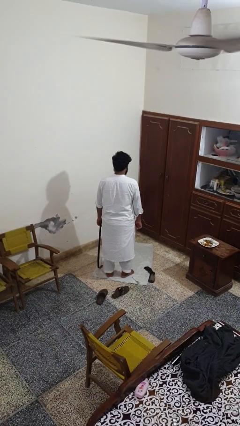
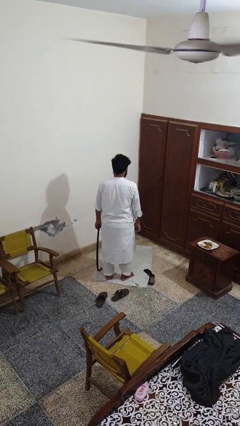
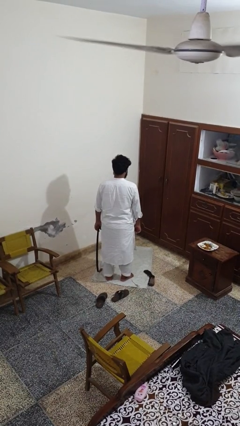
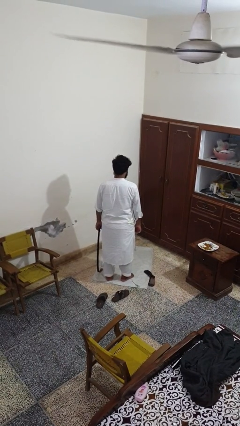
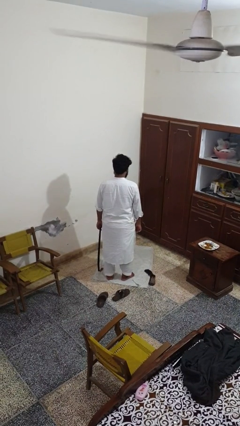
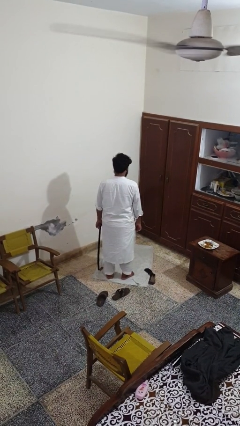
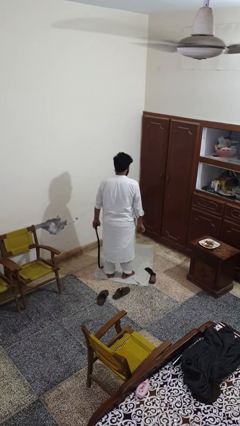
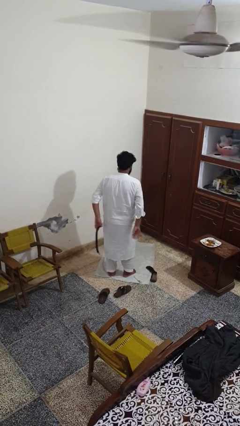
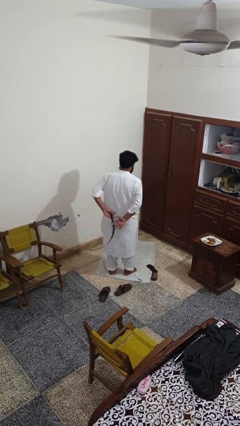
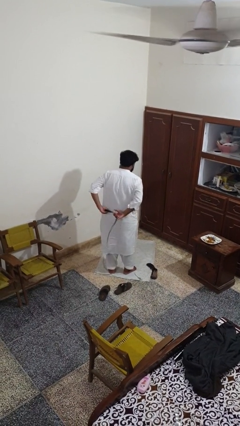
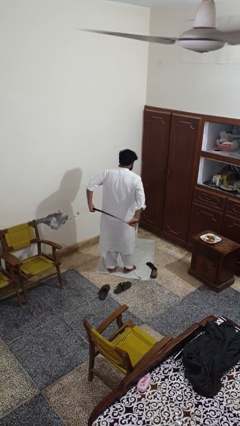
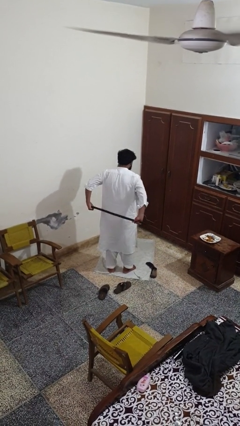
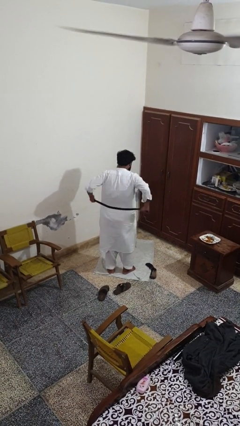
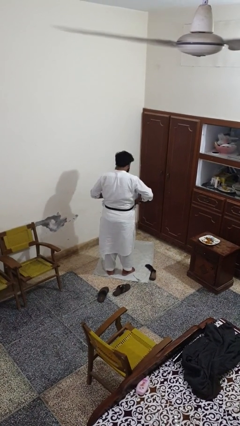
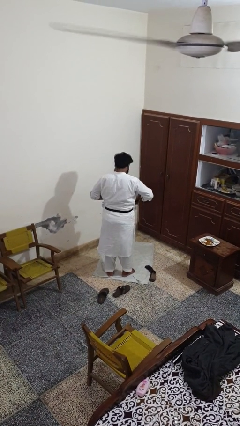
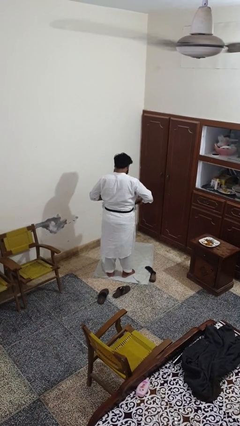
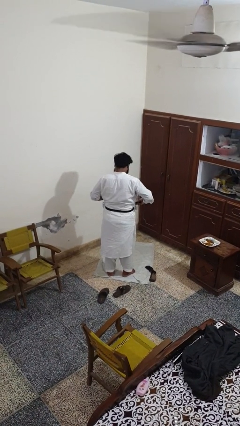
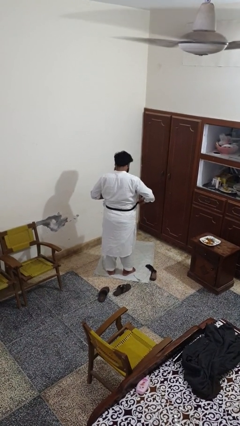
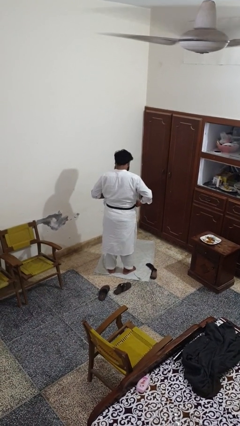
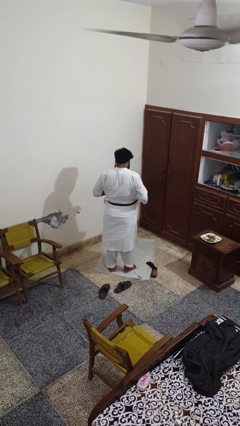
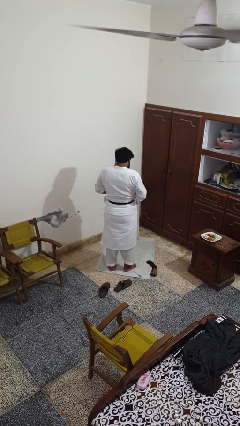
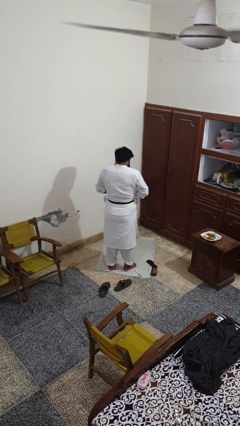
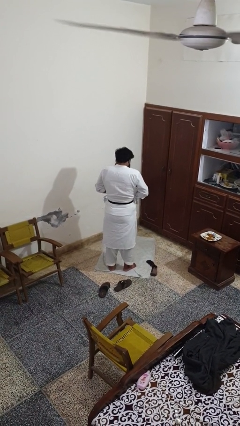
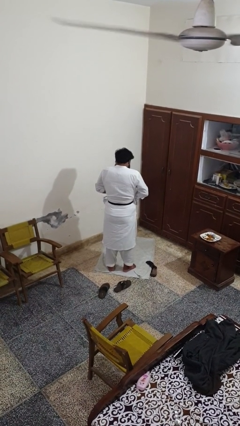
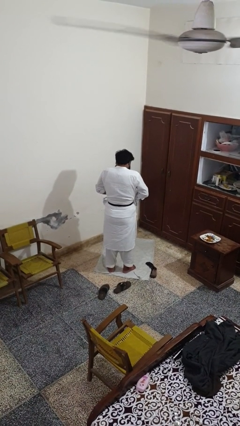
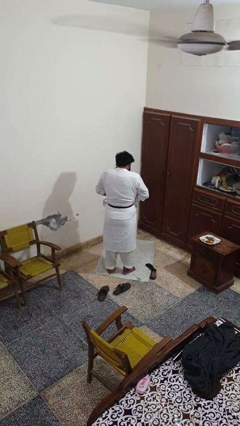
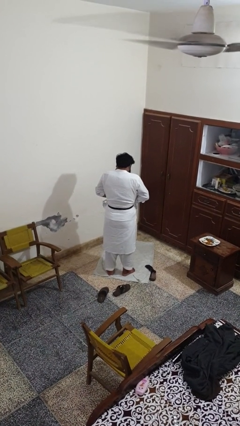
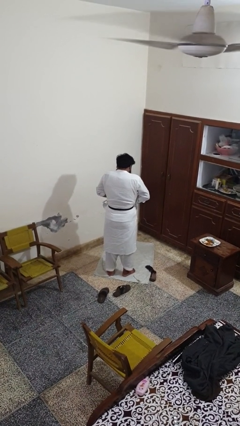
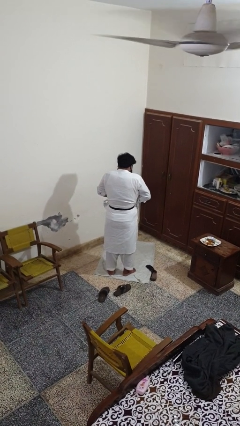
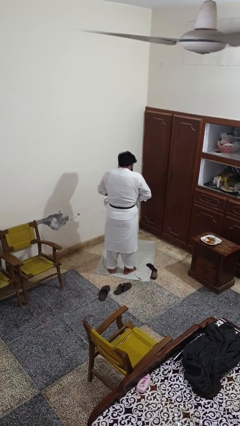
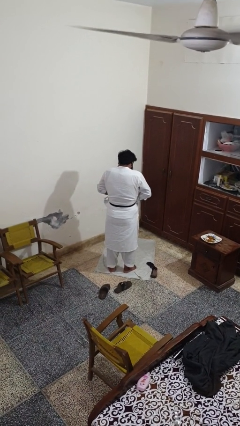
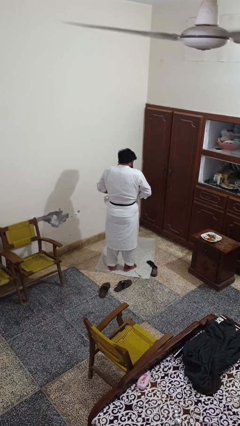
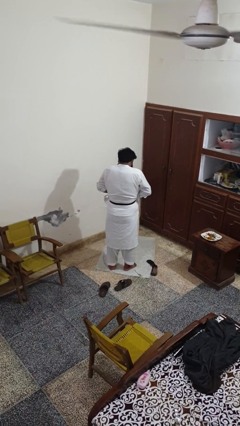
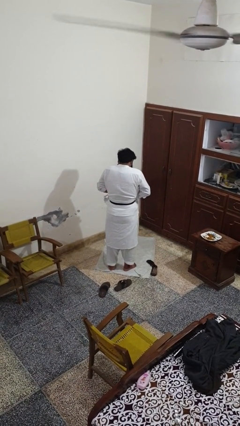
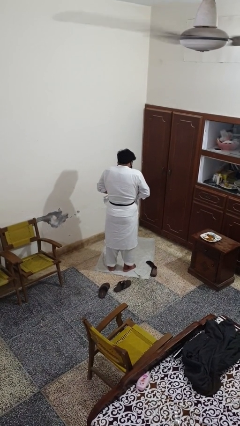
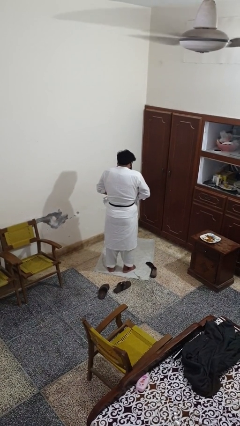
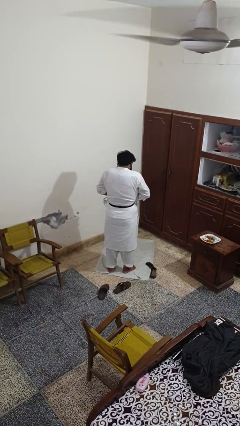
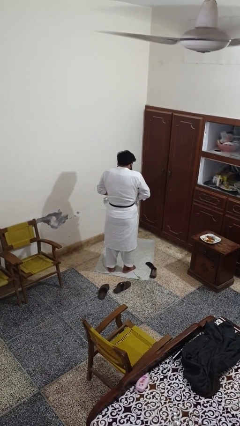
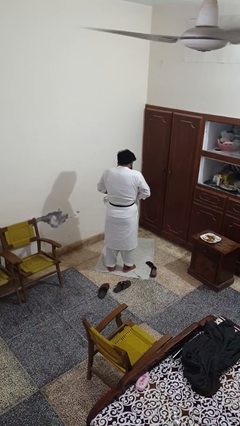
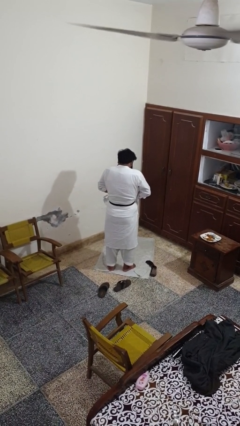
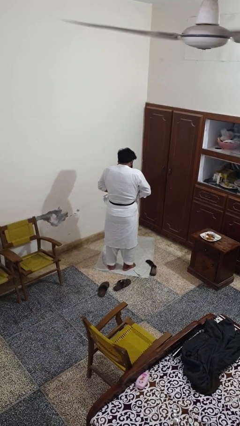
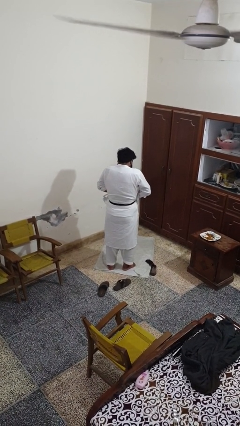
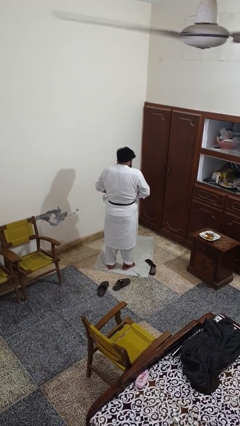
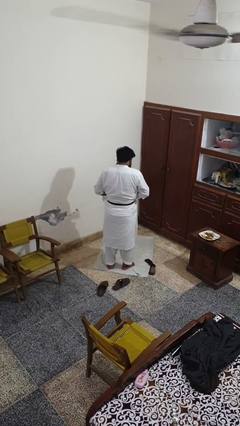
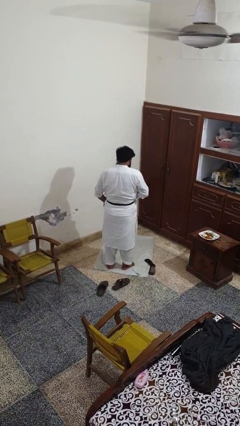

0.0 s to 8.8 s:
person puts on belt

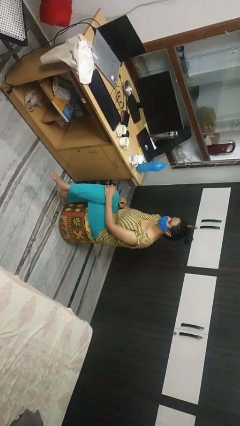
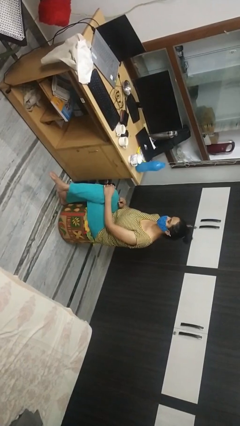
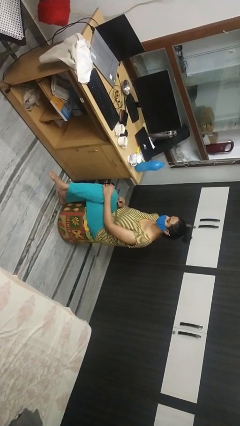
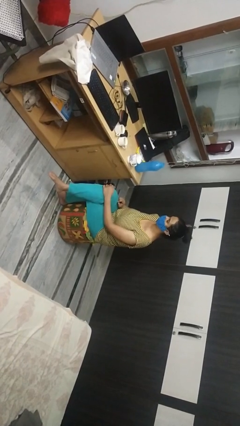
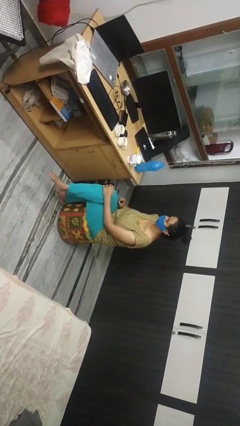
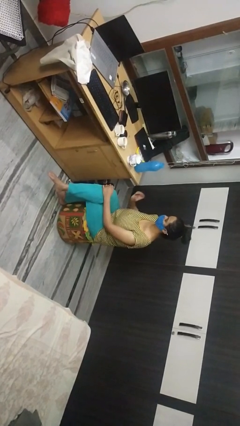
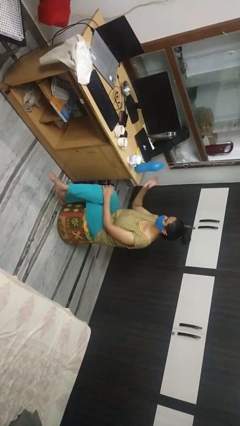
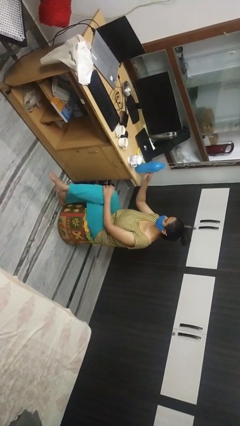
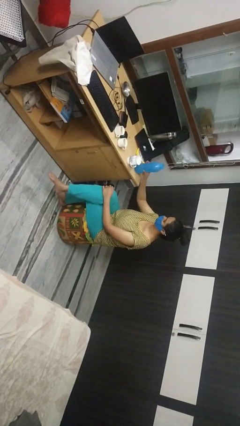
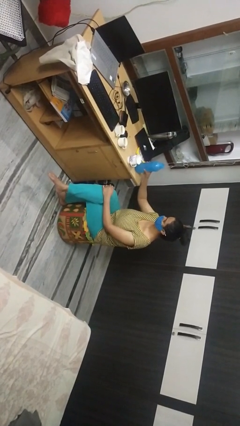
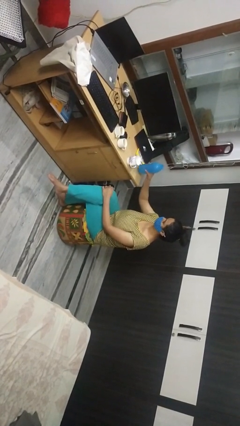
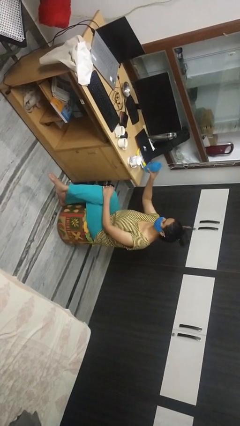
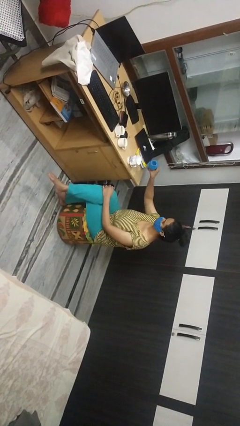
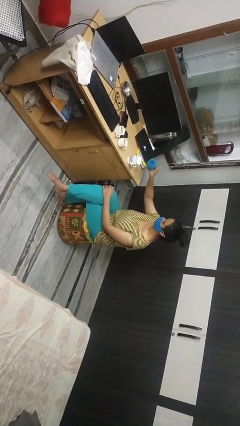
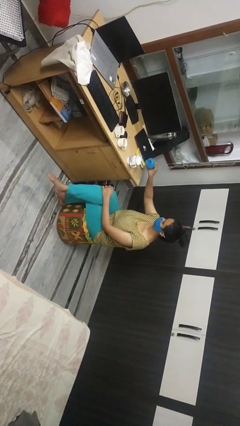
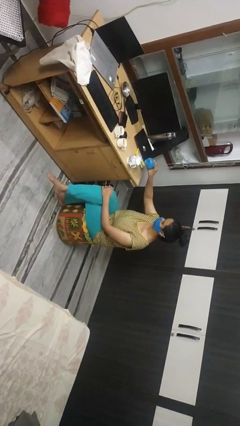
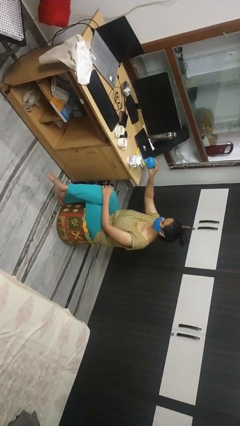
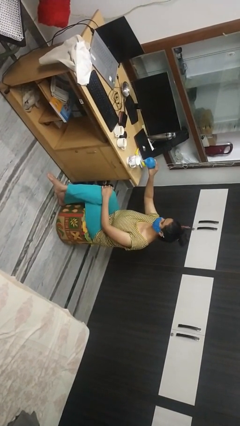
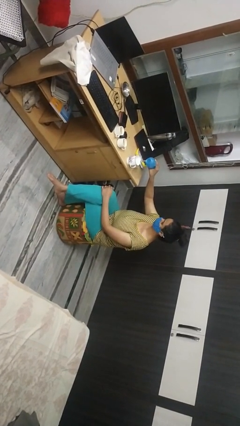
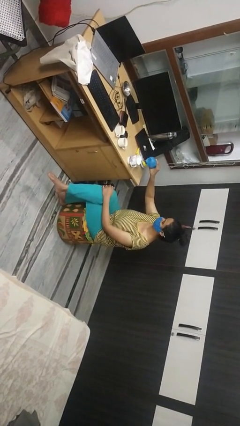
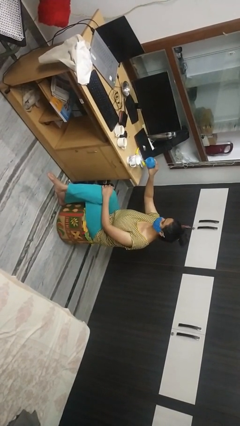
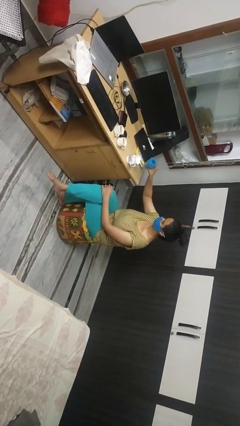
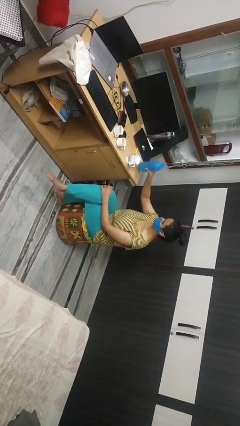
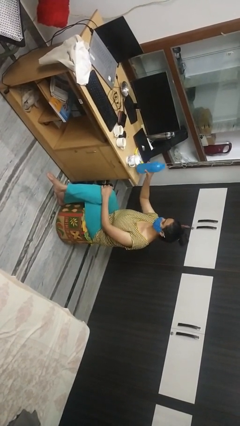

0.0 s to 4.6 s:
person pours liquid into cup

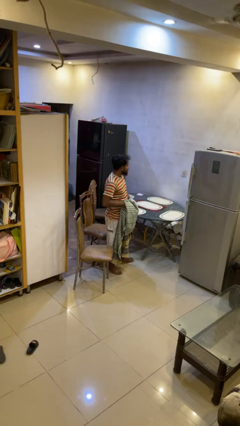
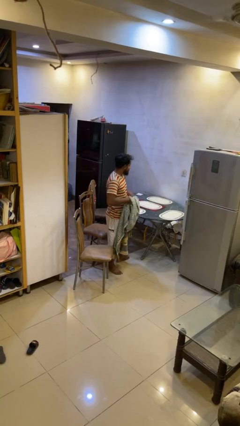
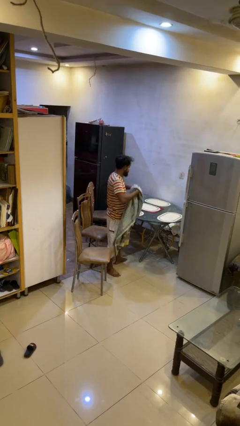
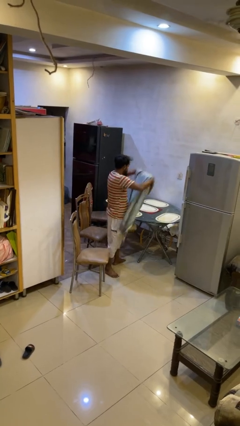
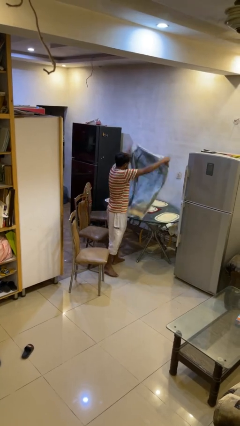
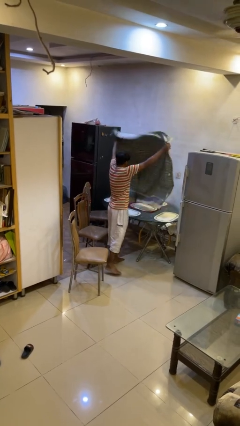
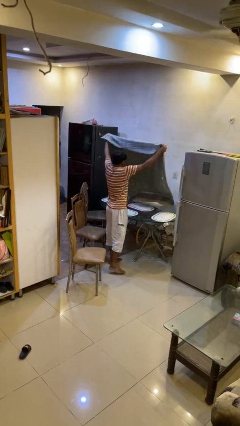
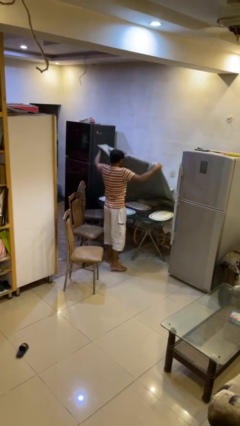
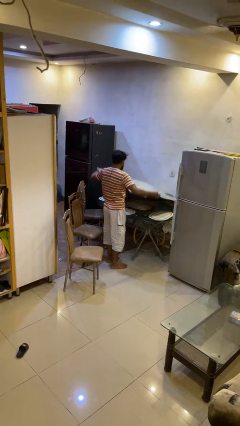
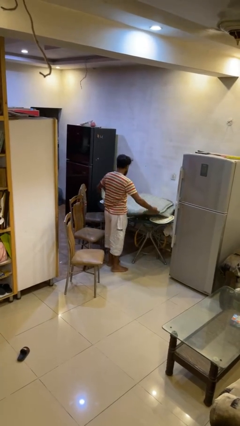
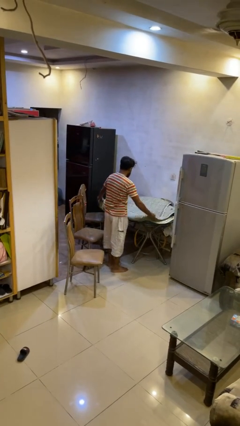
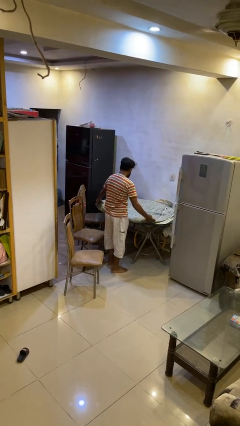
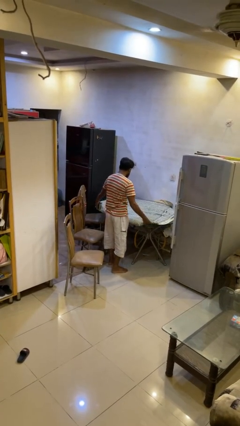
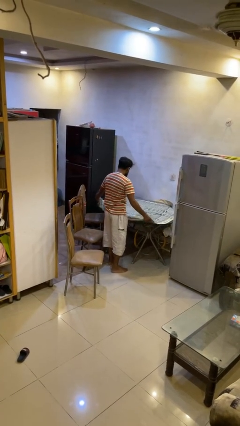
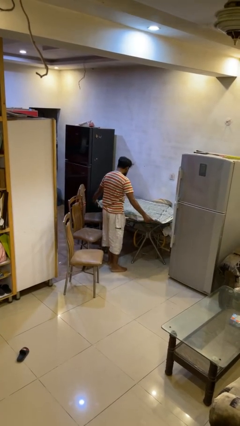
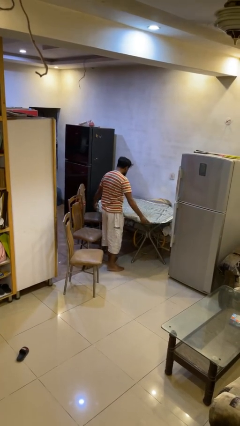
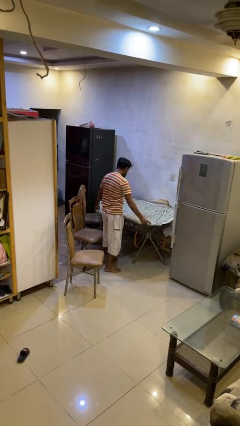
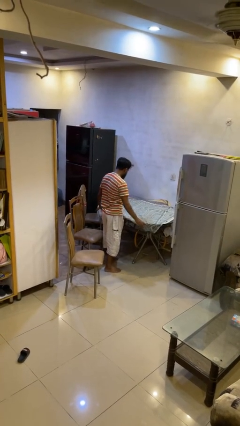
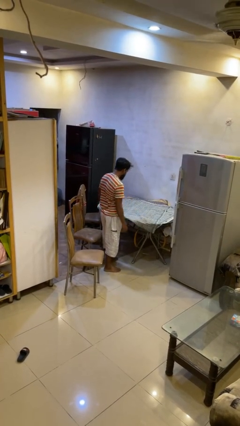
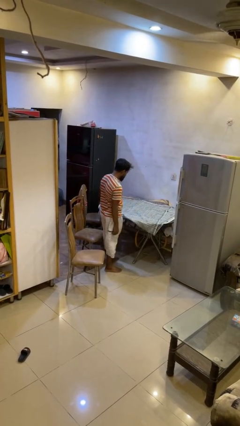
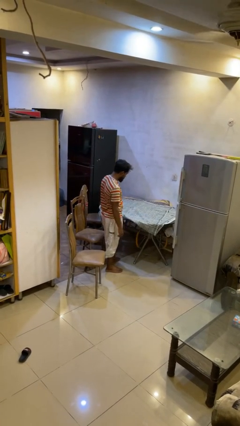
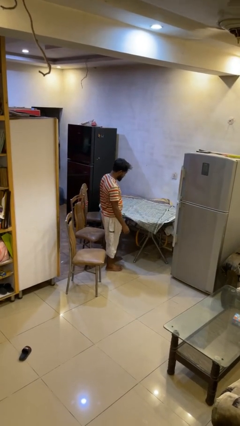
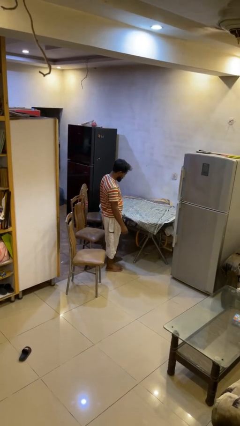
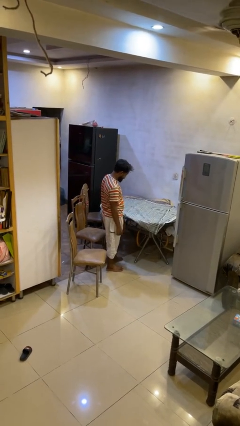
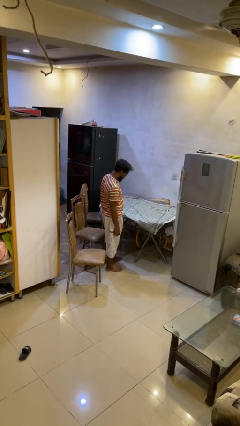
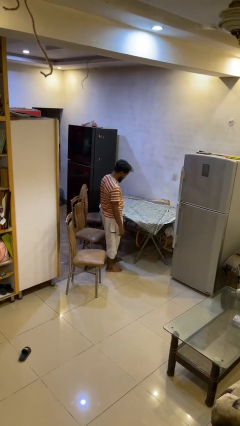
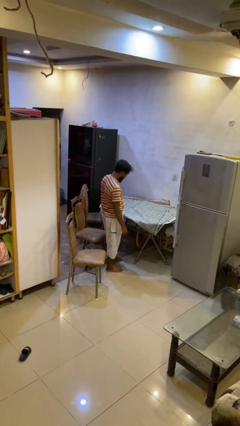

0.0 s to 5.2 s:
person spreads tablecloth
